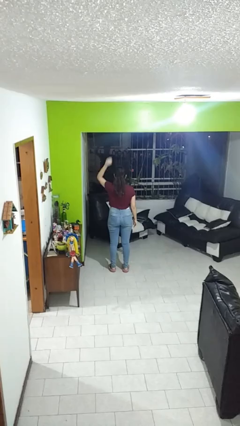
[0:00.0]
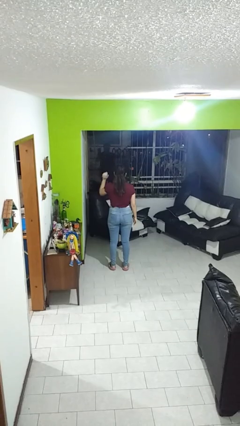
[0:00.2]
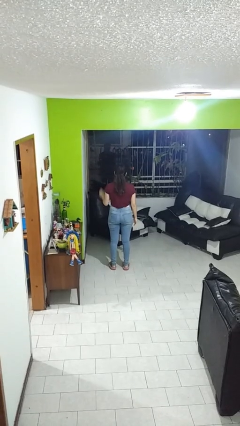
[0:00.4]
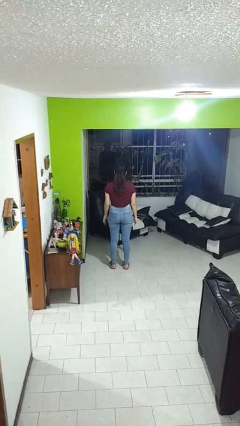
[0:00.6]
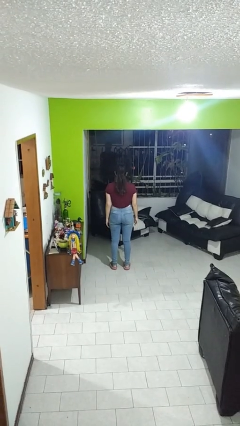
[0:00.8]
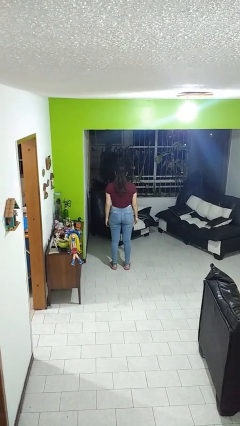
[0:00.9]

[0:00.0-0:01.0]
person gestures lower hand

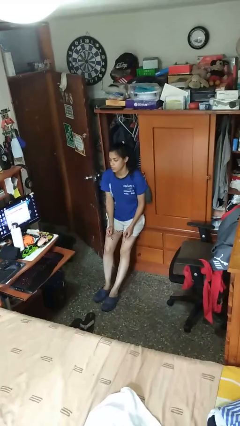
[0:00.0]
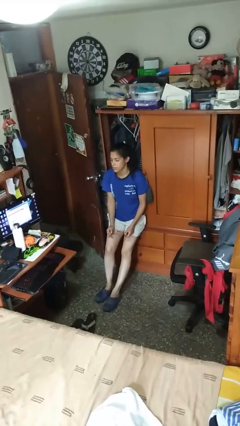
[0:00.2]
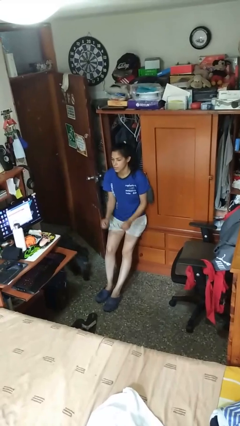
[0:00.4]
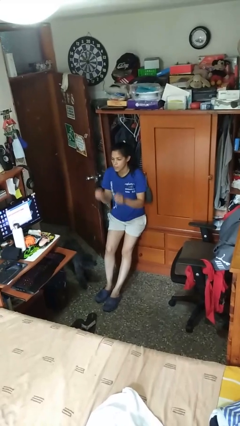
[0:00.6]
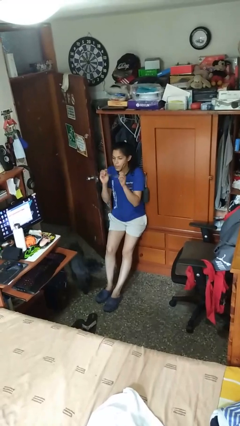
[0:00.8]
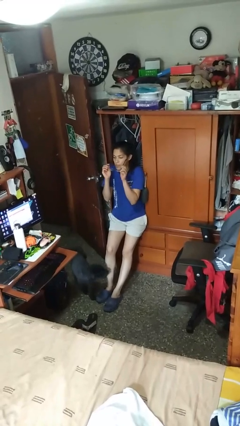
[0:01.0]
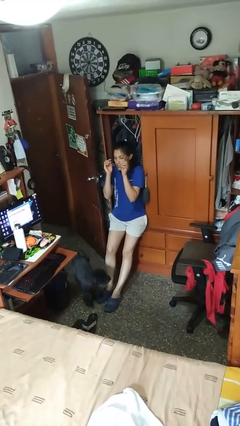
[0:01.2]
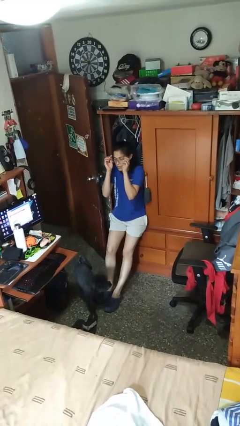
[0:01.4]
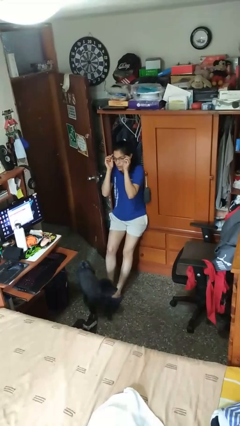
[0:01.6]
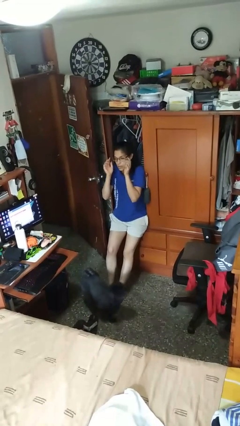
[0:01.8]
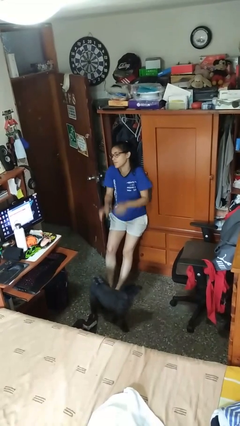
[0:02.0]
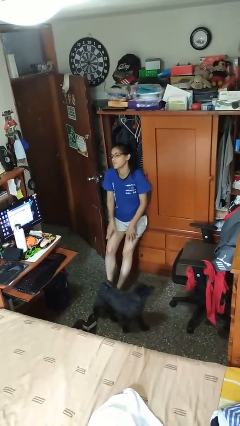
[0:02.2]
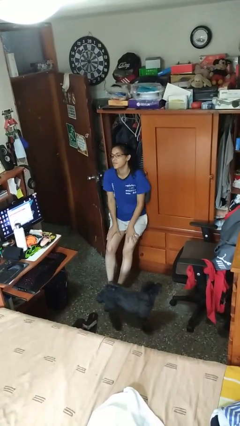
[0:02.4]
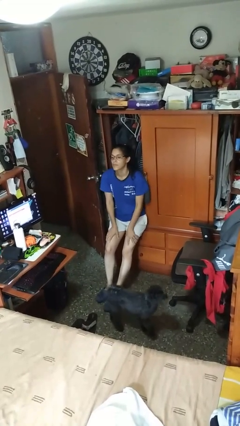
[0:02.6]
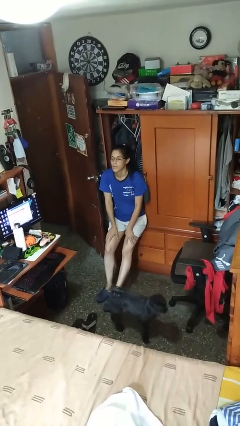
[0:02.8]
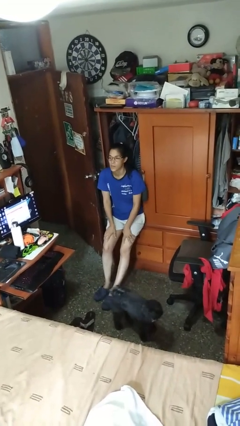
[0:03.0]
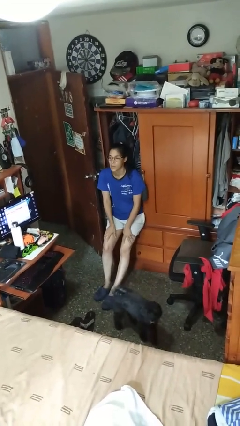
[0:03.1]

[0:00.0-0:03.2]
person puts on glasses

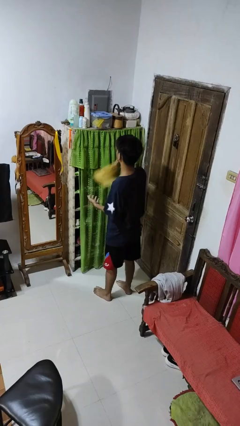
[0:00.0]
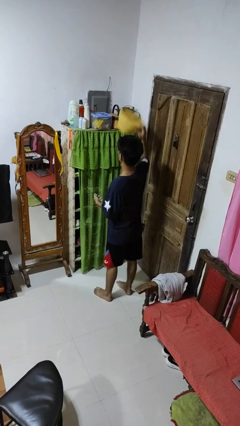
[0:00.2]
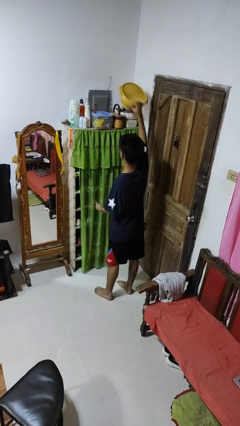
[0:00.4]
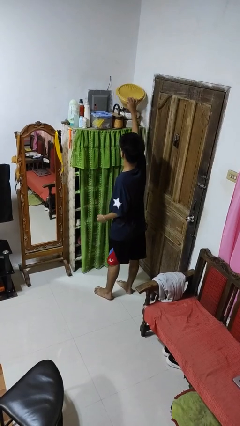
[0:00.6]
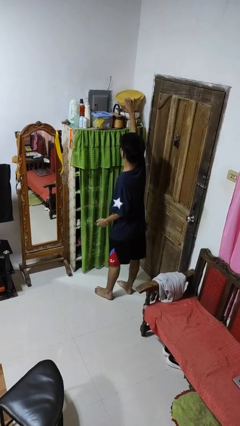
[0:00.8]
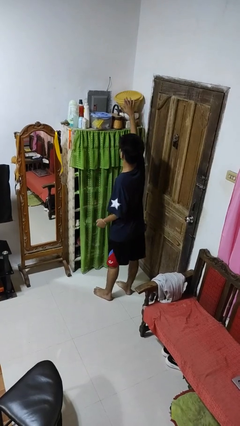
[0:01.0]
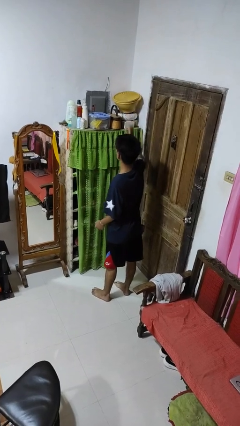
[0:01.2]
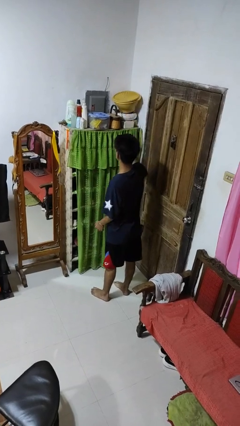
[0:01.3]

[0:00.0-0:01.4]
person puts down object on shelf

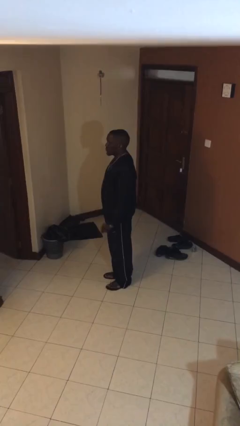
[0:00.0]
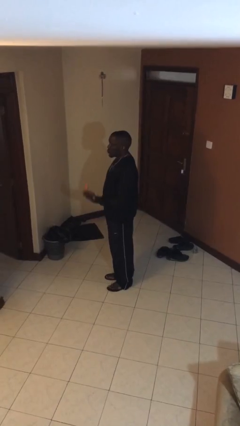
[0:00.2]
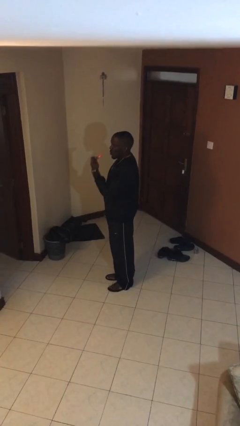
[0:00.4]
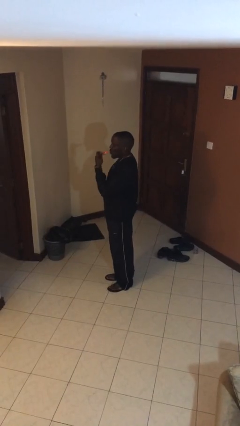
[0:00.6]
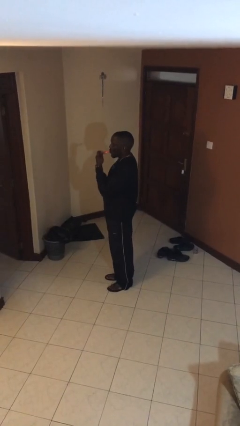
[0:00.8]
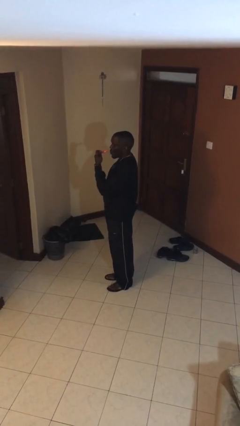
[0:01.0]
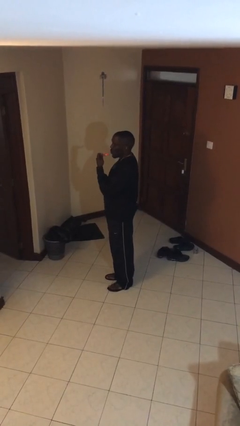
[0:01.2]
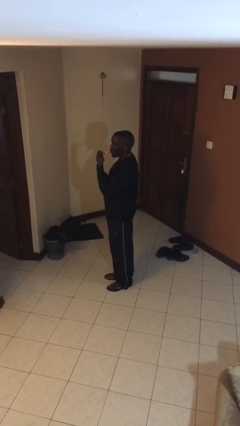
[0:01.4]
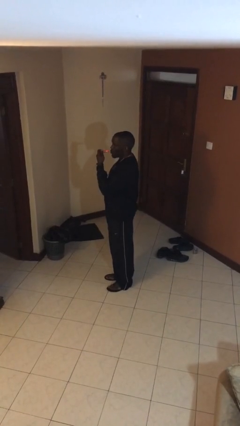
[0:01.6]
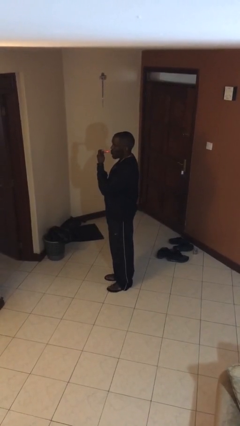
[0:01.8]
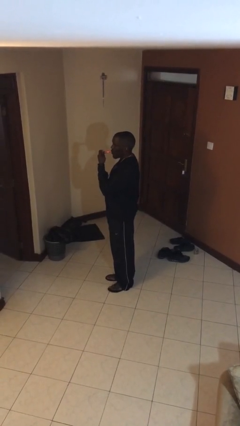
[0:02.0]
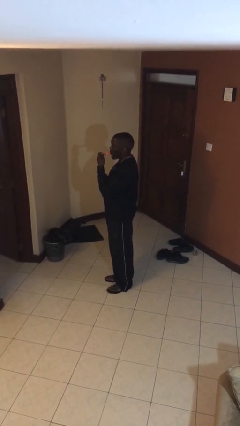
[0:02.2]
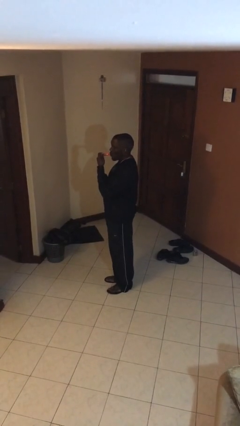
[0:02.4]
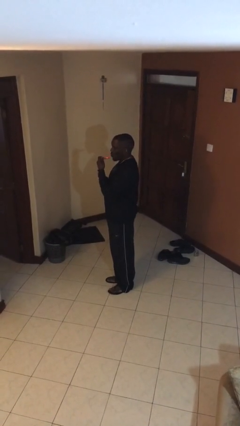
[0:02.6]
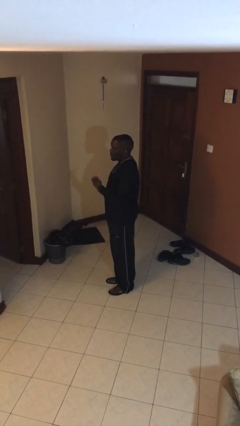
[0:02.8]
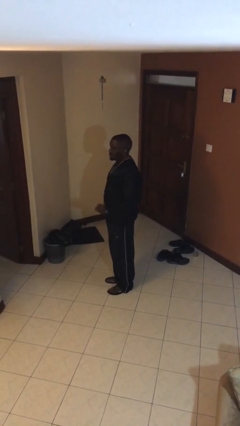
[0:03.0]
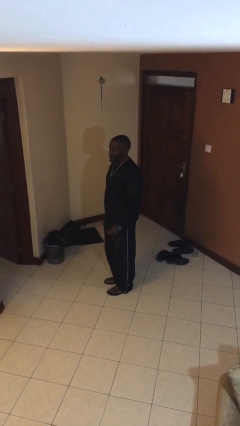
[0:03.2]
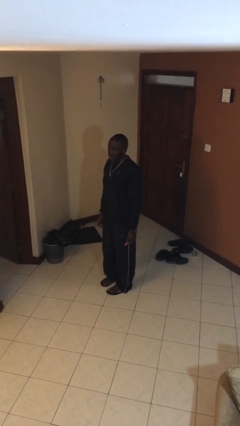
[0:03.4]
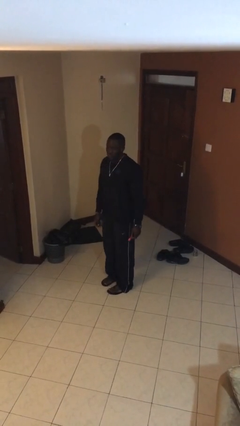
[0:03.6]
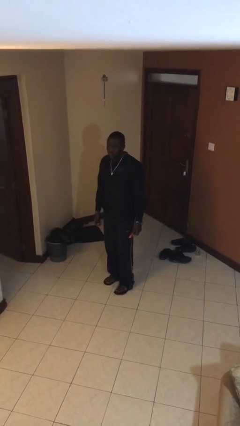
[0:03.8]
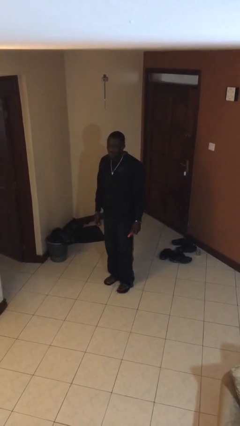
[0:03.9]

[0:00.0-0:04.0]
person applies lip makeup

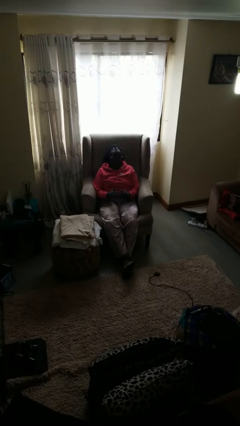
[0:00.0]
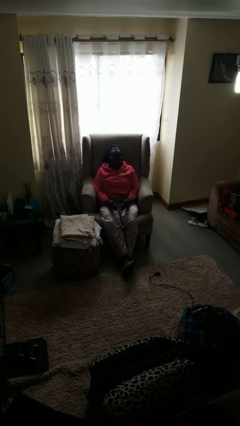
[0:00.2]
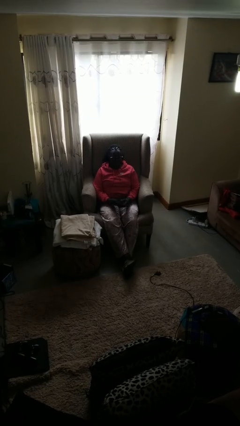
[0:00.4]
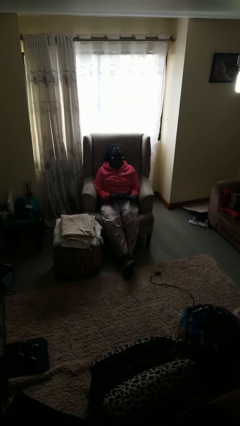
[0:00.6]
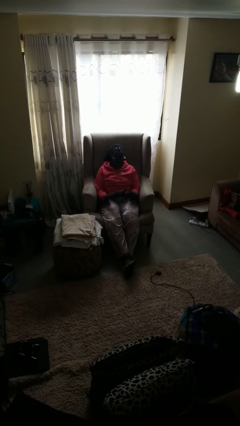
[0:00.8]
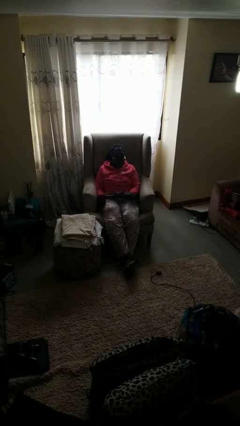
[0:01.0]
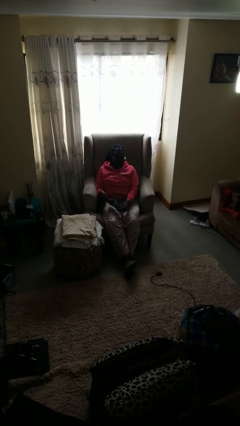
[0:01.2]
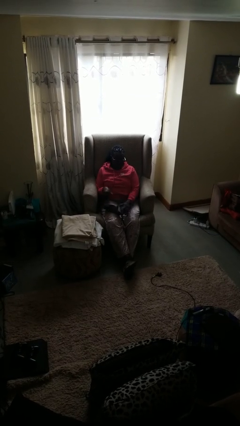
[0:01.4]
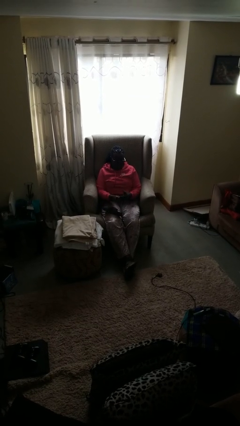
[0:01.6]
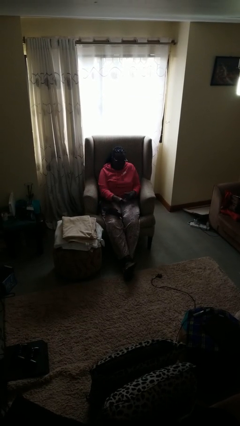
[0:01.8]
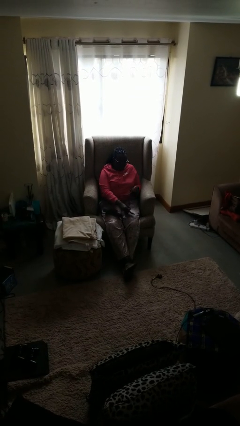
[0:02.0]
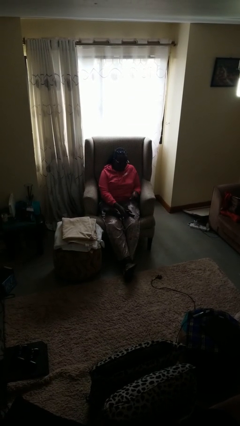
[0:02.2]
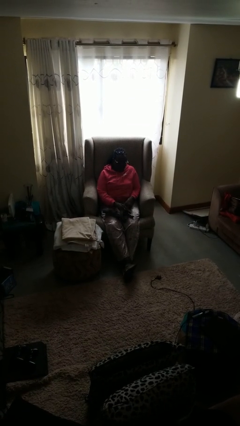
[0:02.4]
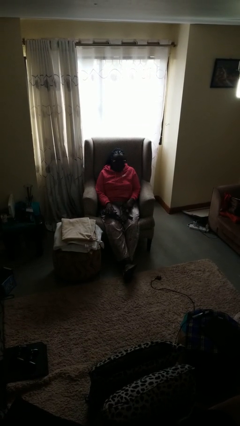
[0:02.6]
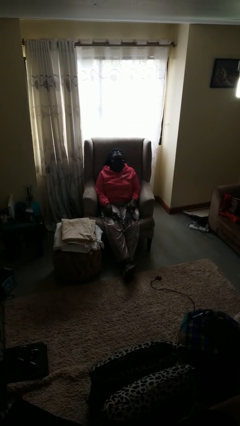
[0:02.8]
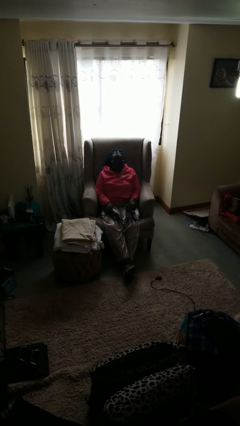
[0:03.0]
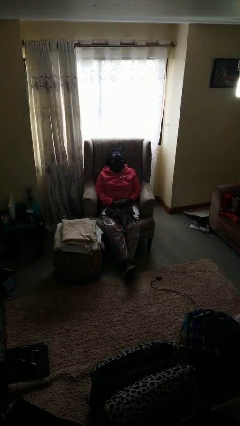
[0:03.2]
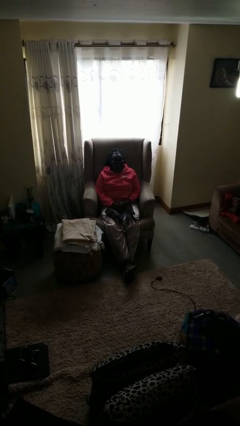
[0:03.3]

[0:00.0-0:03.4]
person takes off gloves

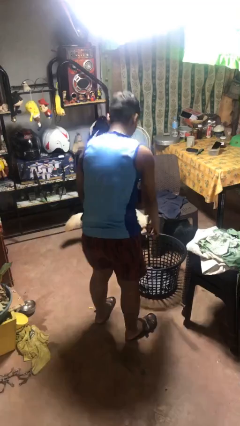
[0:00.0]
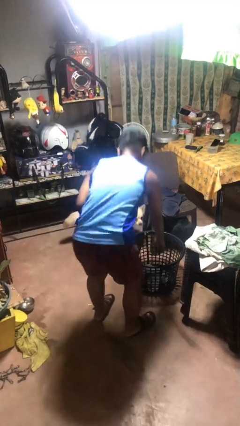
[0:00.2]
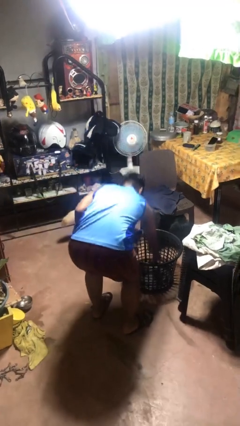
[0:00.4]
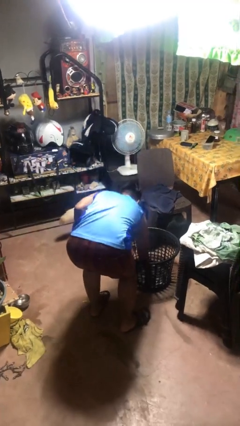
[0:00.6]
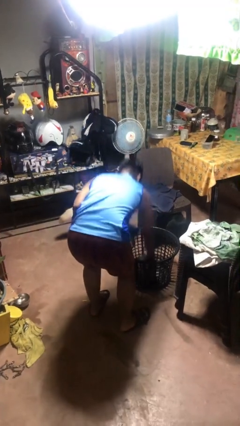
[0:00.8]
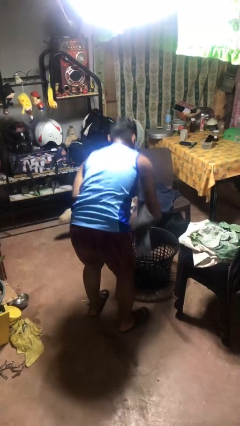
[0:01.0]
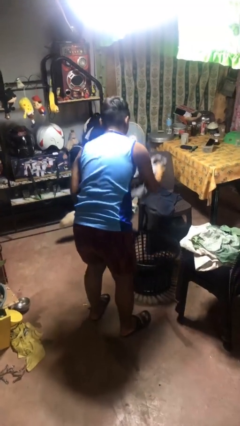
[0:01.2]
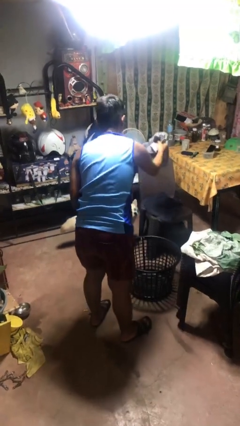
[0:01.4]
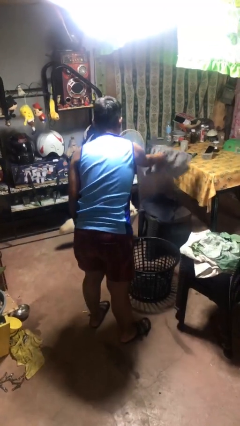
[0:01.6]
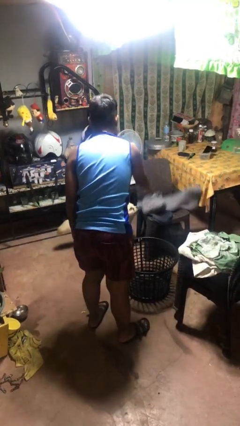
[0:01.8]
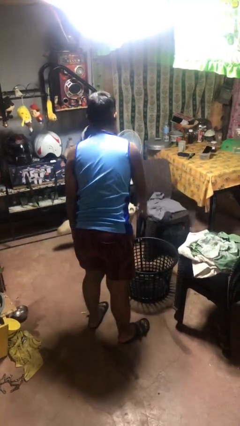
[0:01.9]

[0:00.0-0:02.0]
person takes object from basket

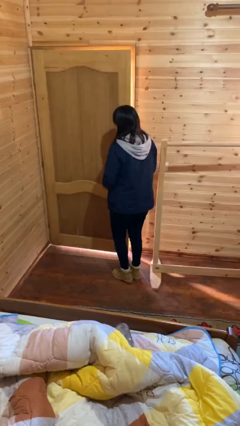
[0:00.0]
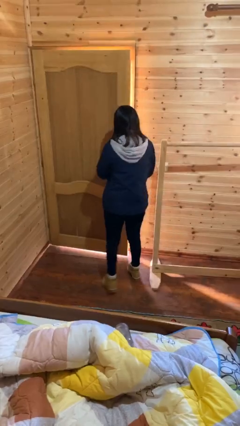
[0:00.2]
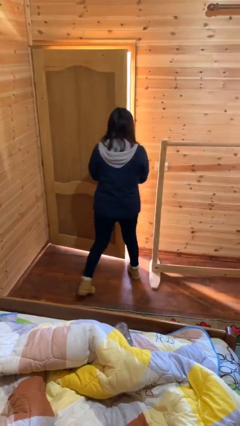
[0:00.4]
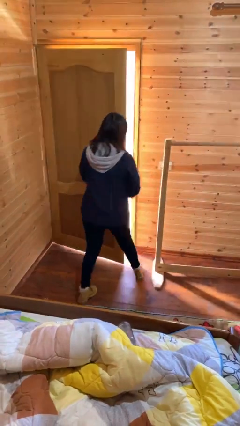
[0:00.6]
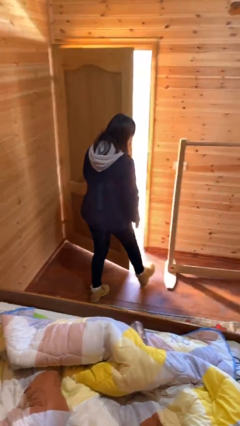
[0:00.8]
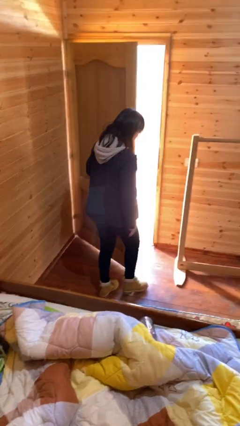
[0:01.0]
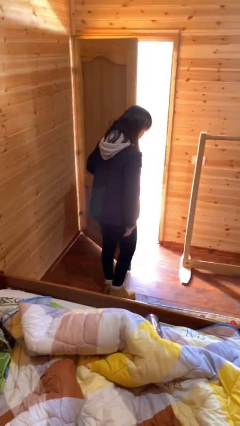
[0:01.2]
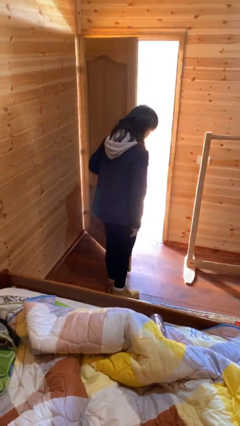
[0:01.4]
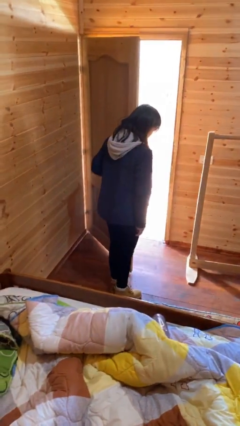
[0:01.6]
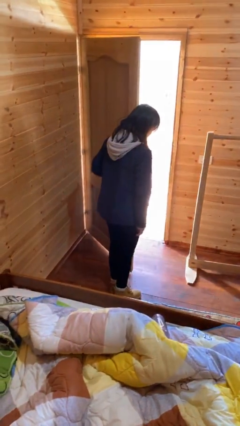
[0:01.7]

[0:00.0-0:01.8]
person opens facility door
